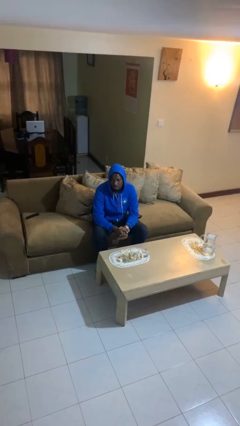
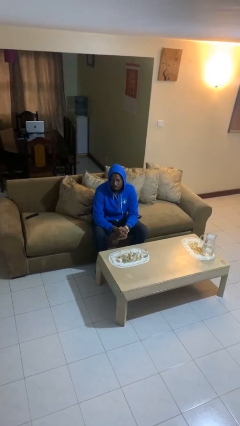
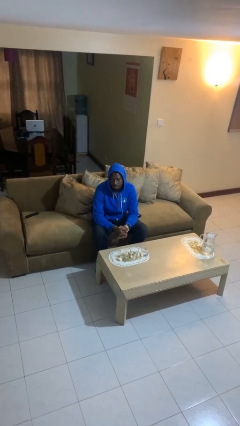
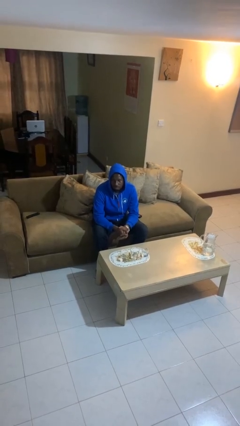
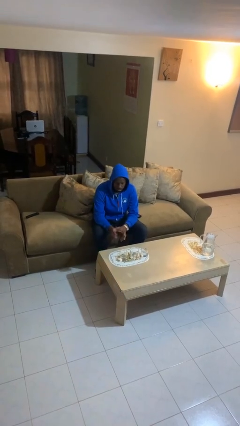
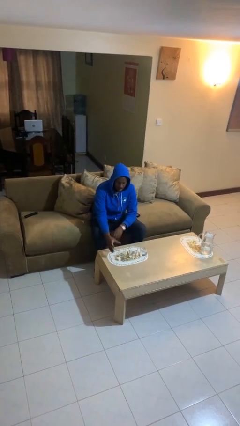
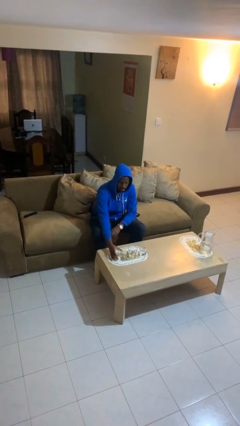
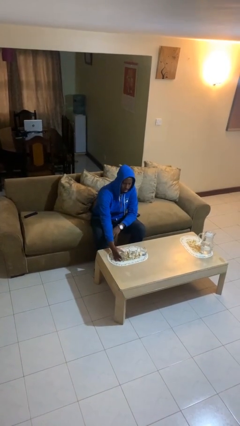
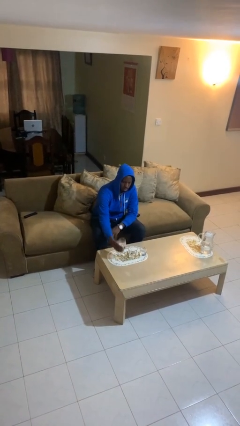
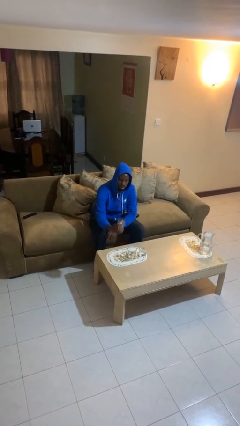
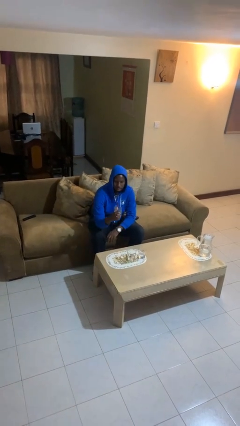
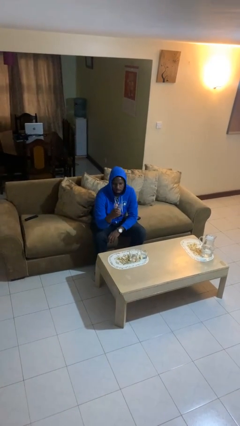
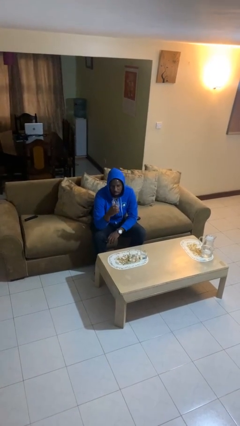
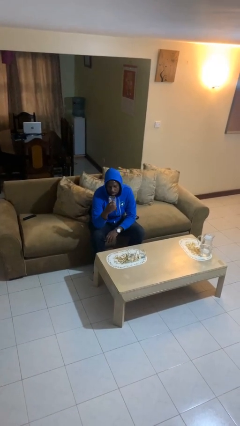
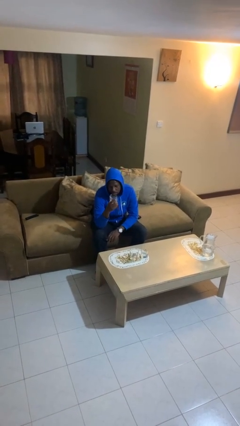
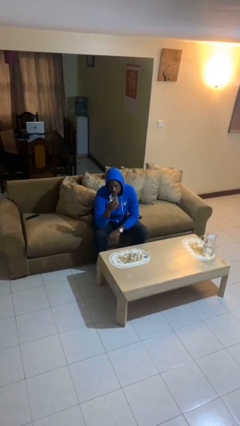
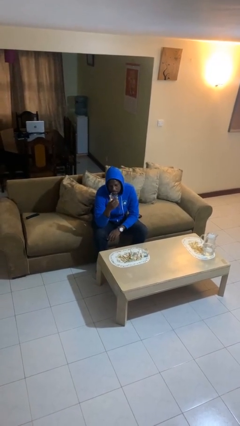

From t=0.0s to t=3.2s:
person picks up object from table

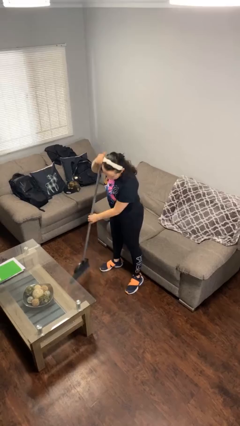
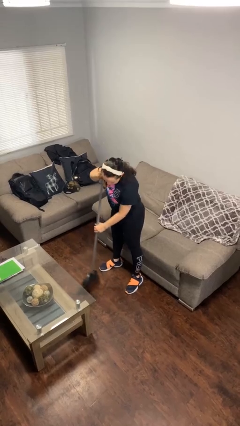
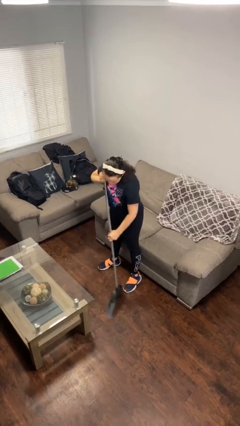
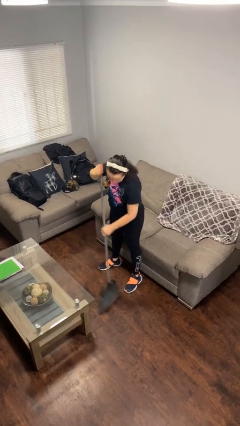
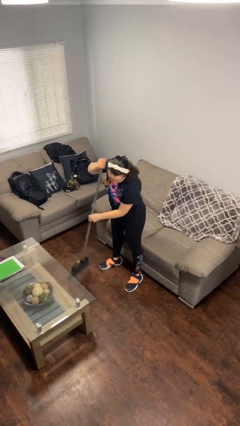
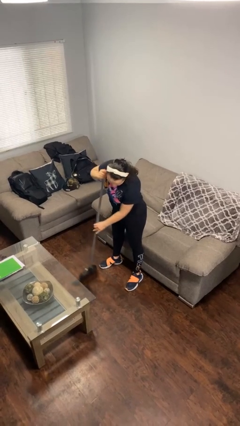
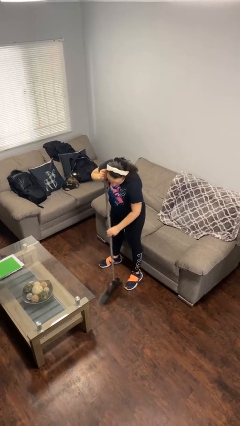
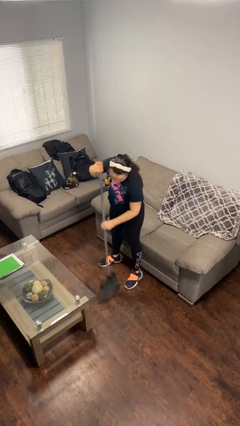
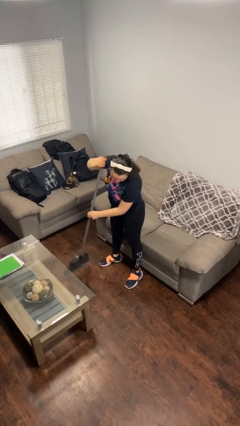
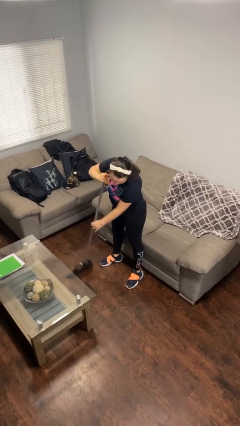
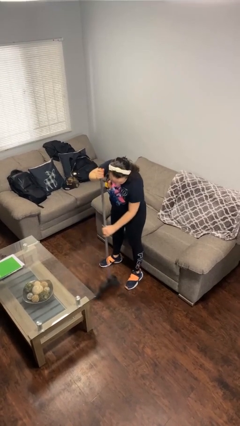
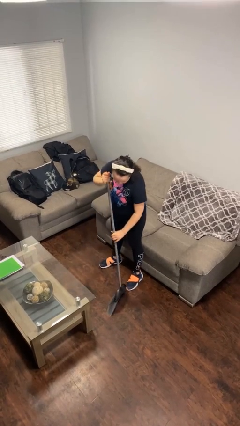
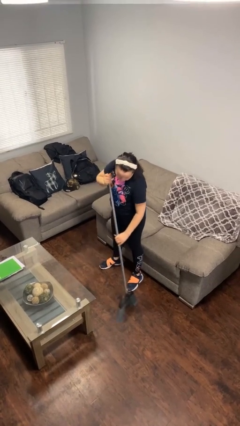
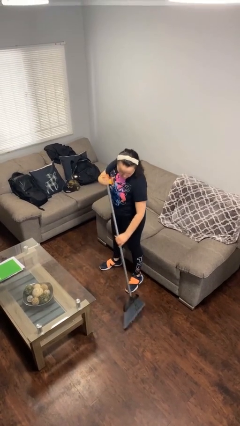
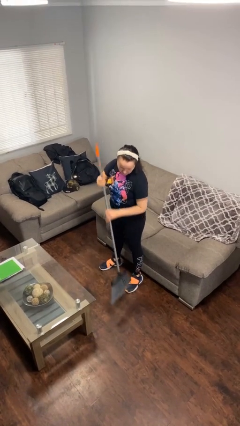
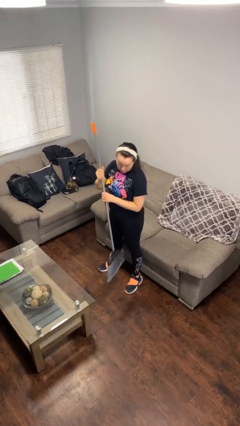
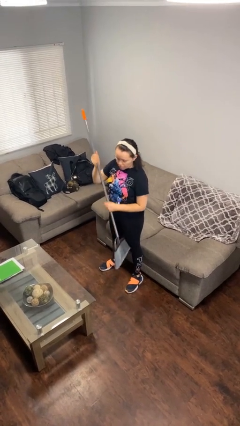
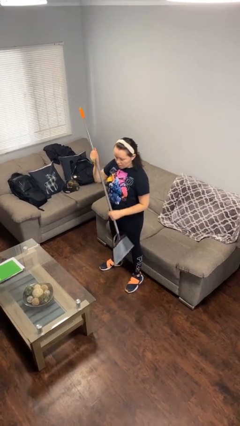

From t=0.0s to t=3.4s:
person sweeps floor

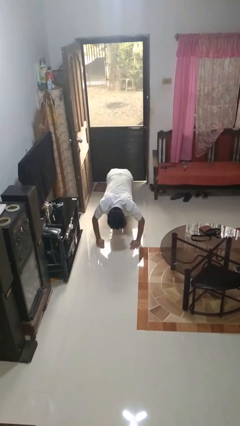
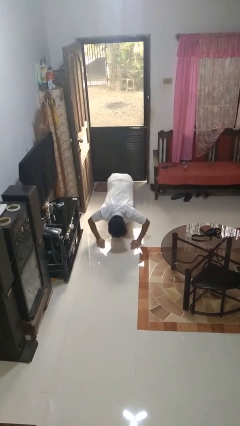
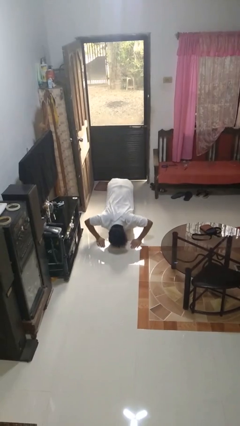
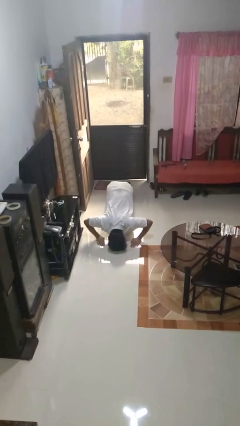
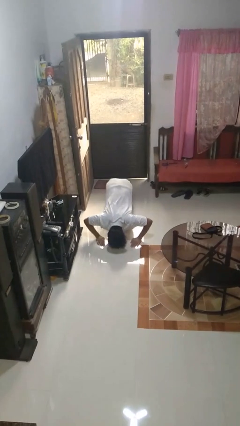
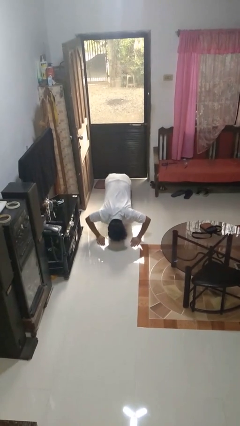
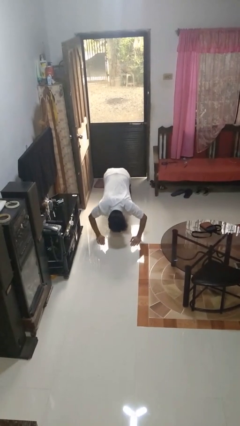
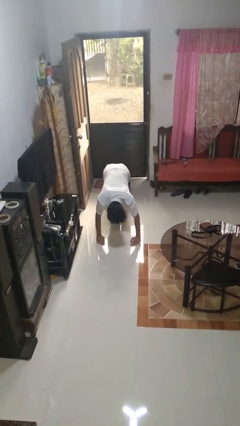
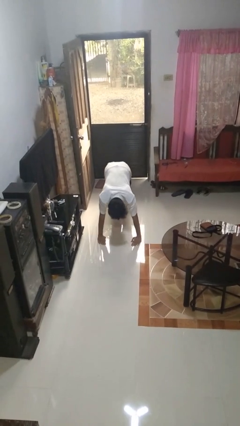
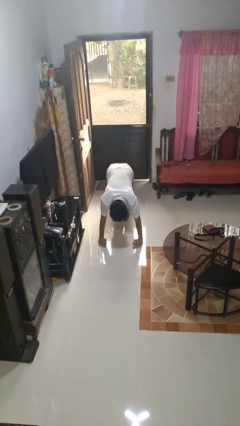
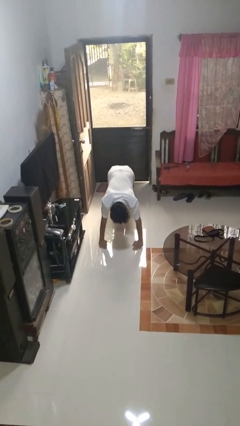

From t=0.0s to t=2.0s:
person exercises with pushup

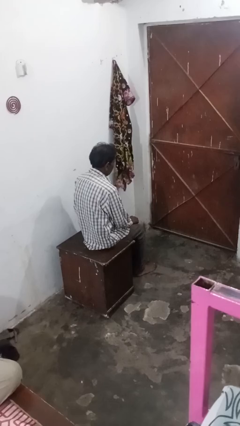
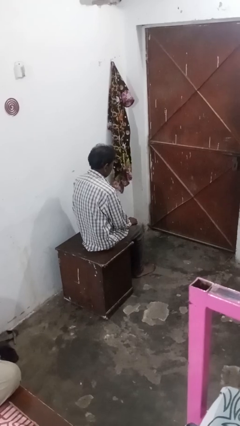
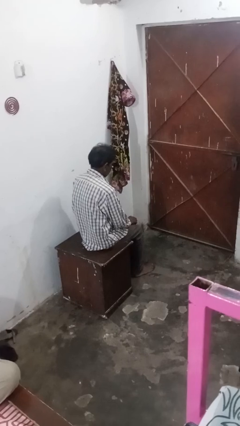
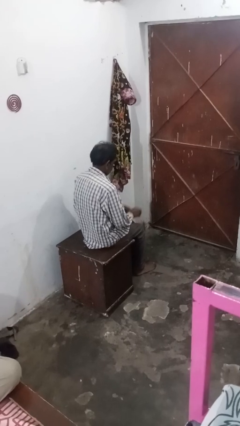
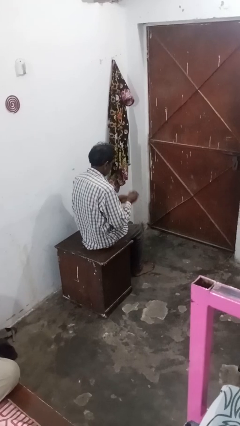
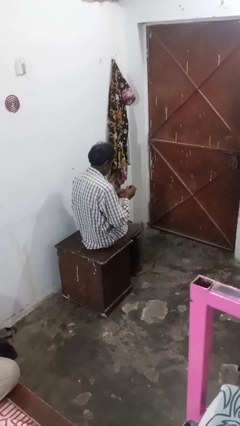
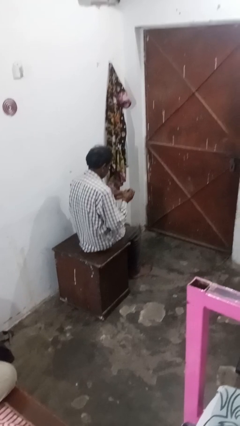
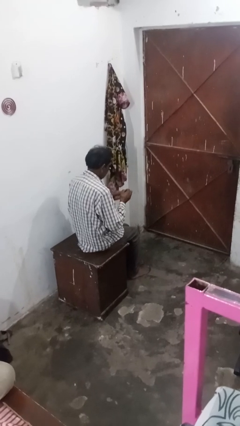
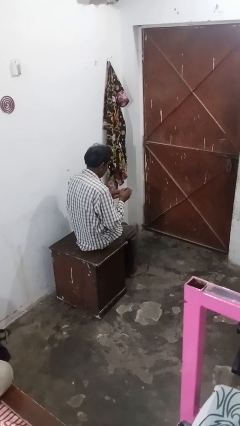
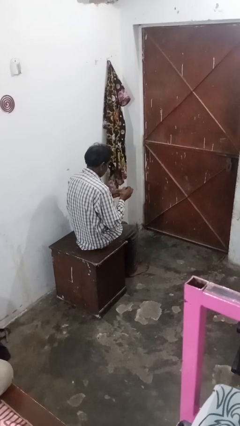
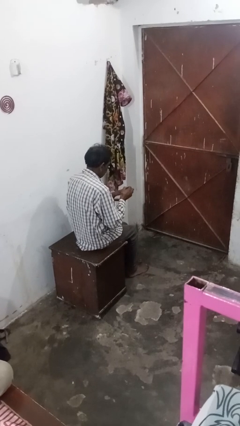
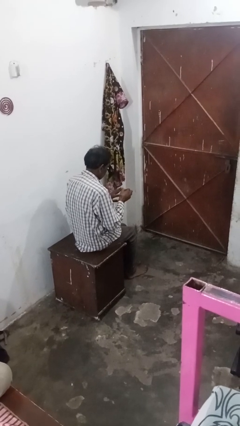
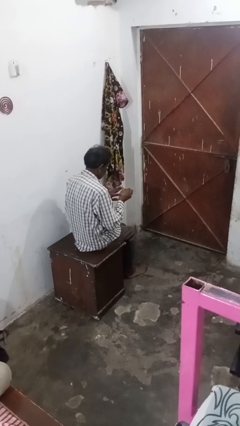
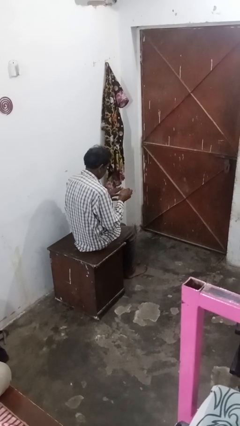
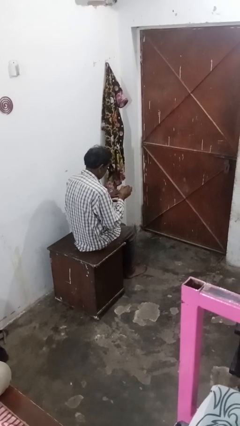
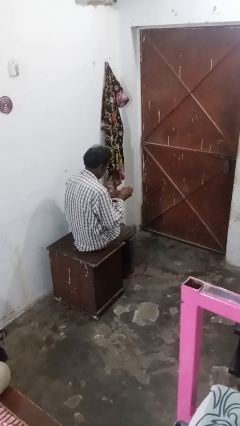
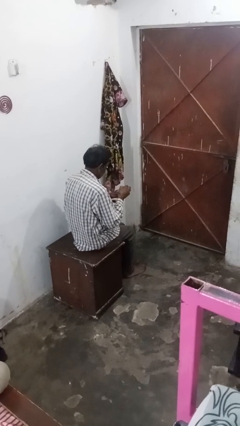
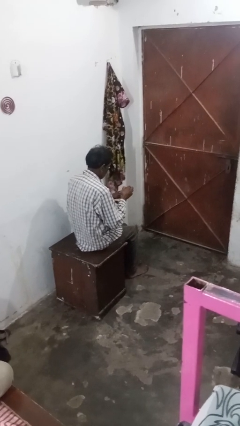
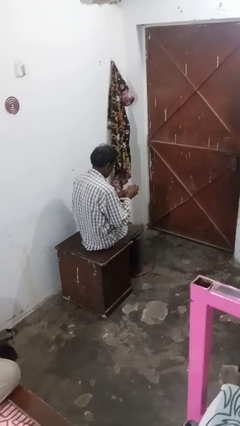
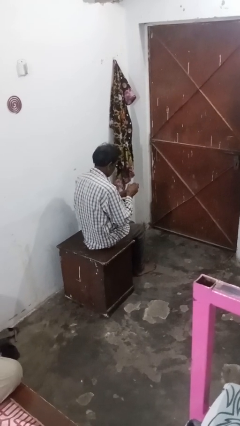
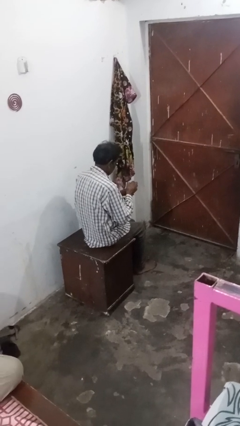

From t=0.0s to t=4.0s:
person paints fingernails

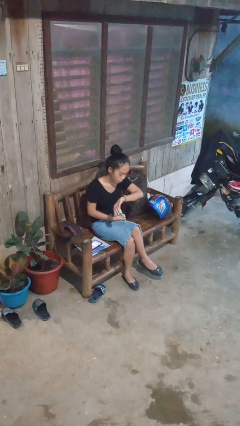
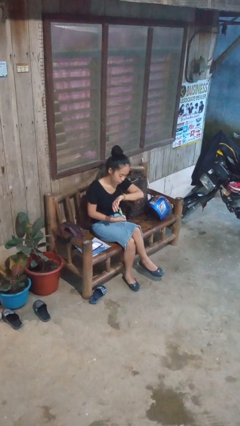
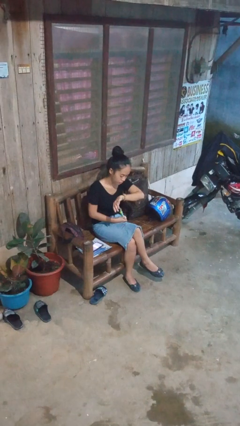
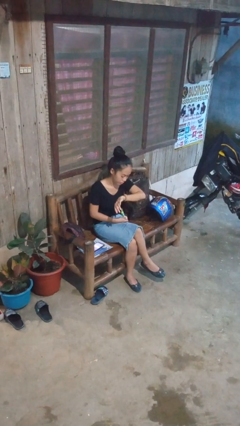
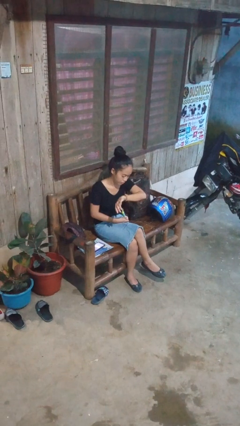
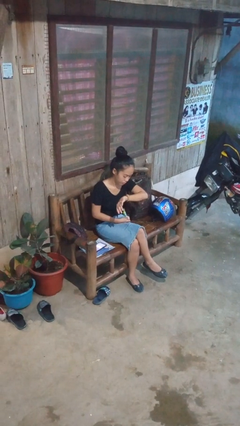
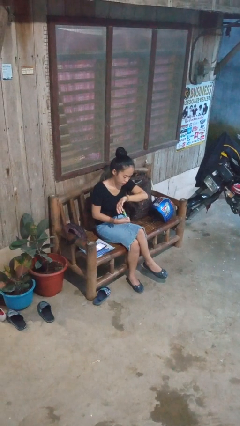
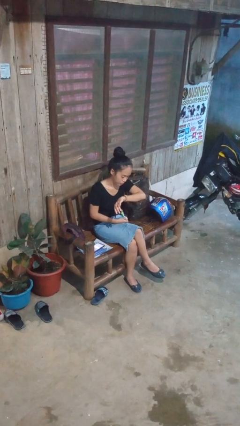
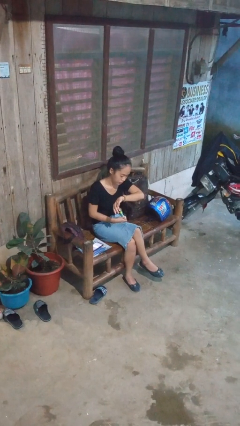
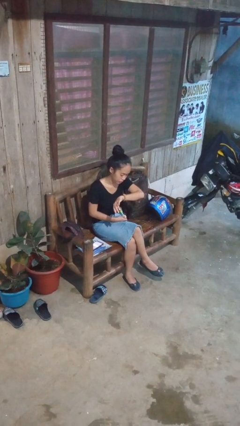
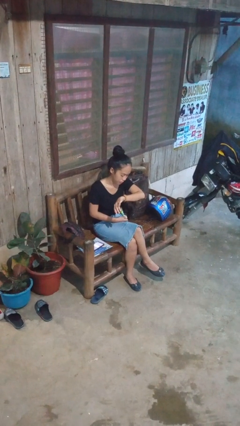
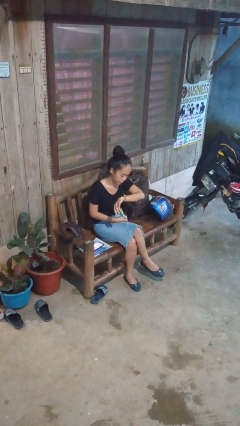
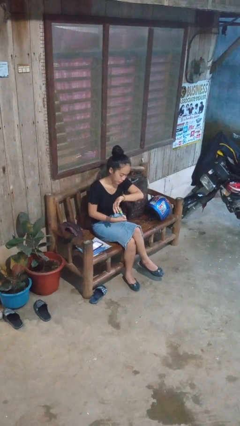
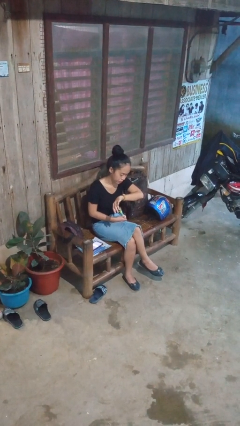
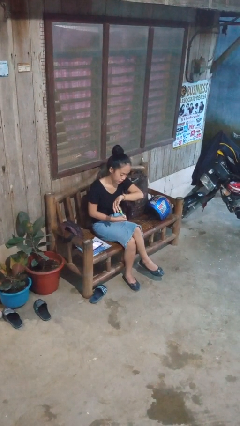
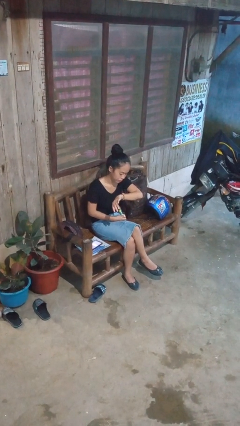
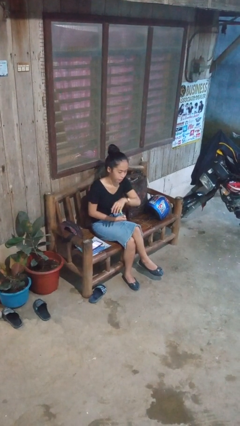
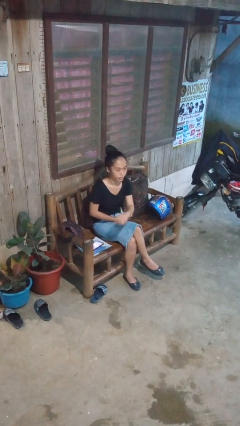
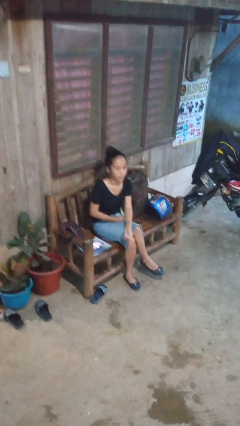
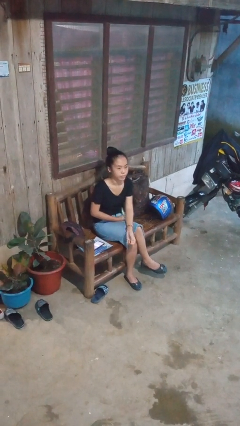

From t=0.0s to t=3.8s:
person looks at wristwatch

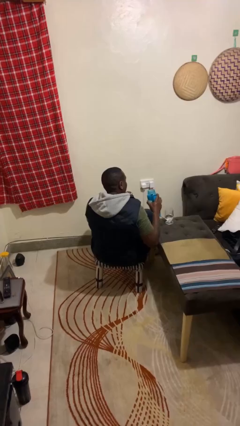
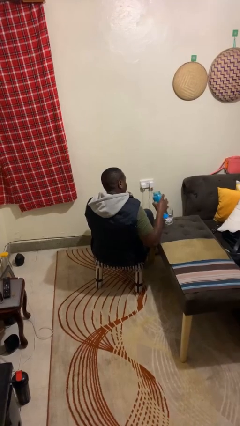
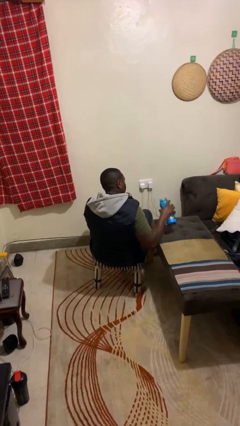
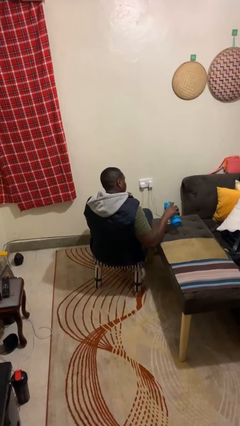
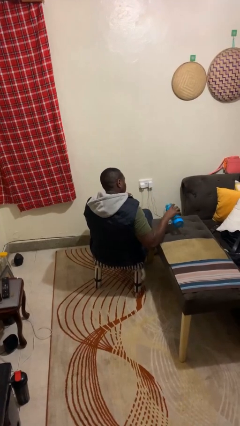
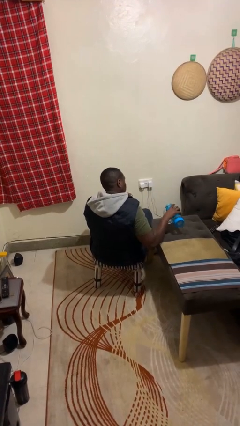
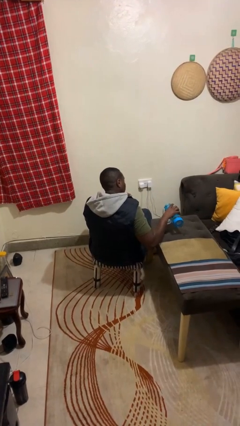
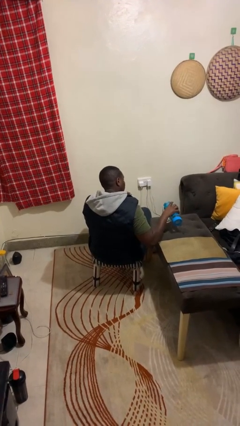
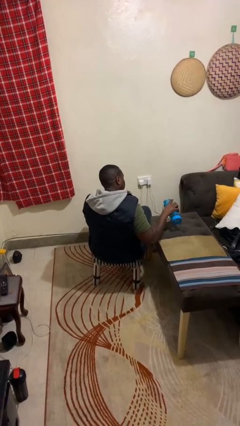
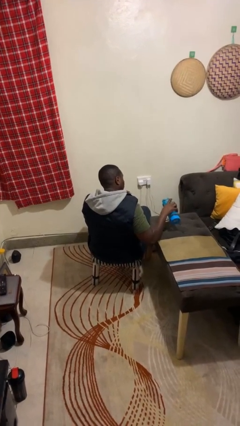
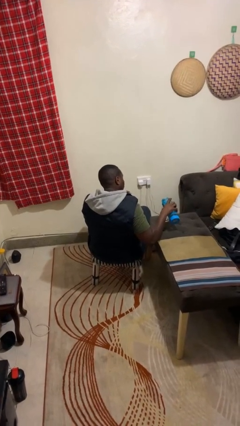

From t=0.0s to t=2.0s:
person pours liquid into cup
